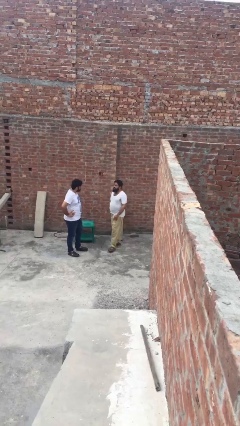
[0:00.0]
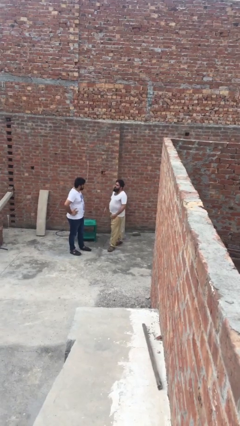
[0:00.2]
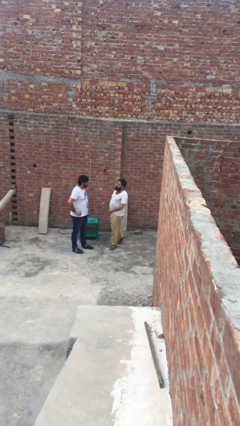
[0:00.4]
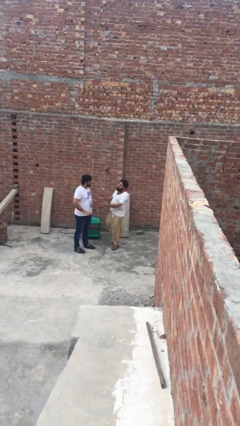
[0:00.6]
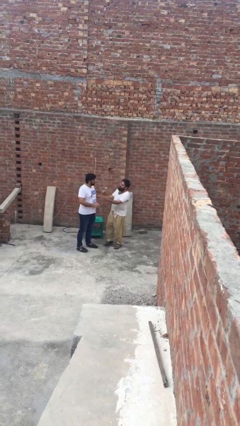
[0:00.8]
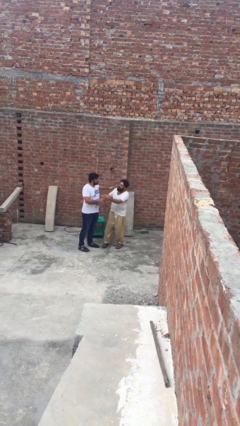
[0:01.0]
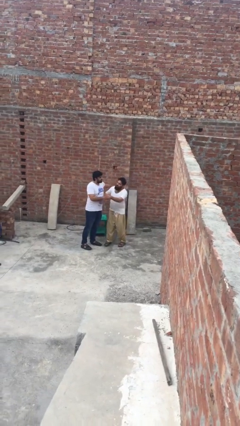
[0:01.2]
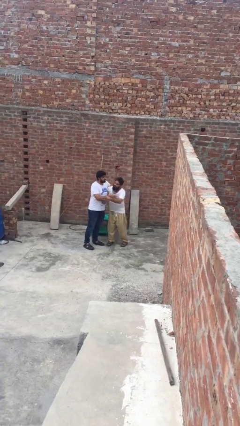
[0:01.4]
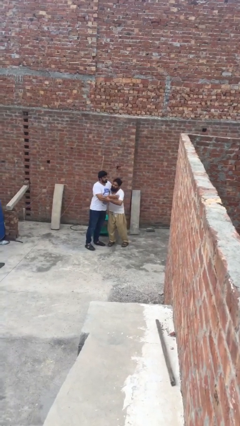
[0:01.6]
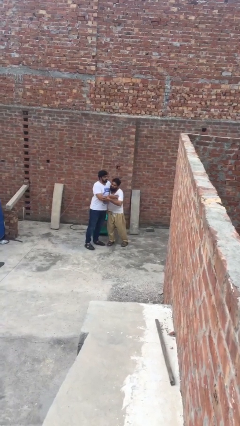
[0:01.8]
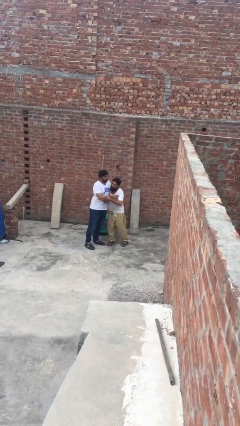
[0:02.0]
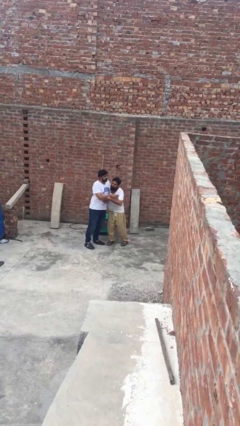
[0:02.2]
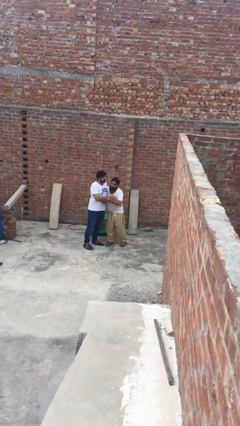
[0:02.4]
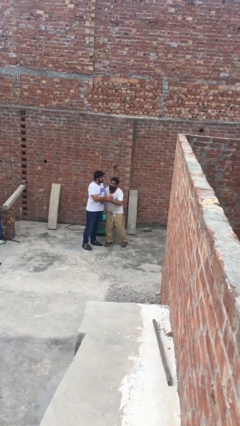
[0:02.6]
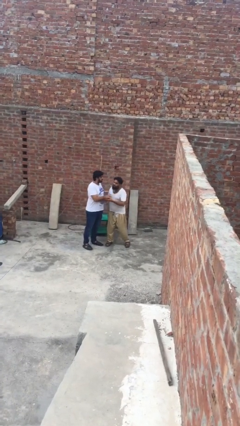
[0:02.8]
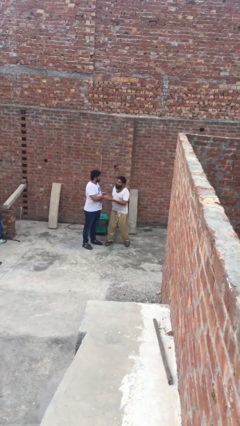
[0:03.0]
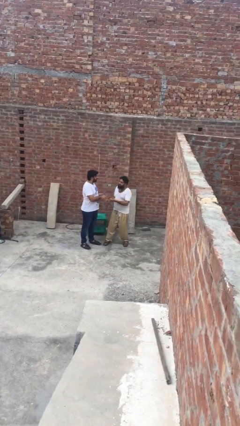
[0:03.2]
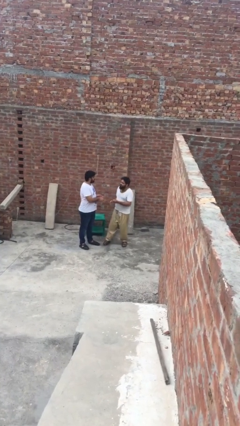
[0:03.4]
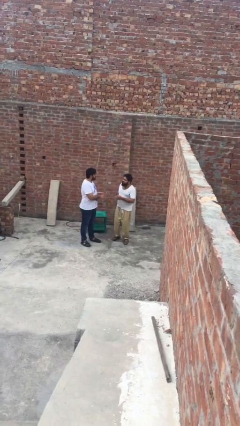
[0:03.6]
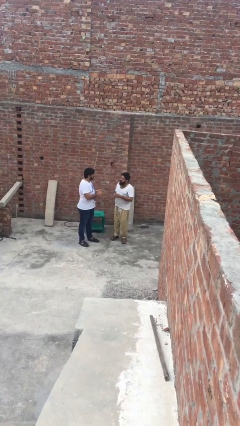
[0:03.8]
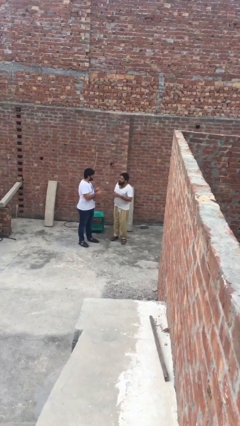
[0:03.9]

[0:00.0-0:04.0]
person embraces person

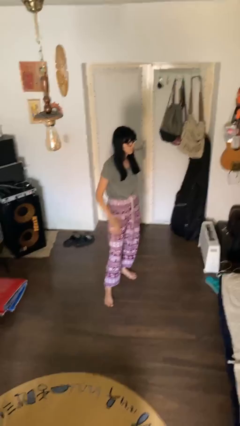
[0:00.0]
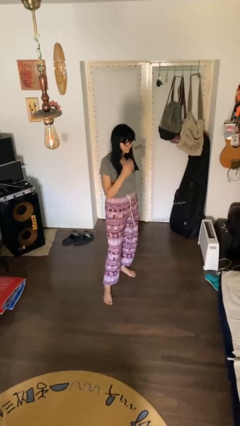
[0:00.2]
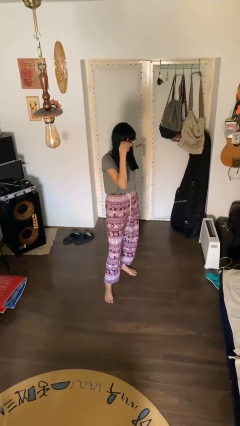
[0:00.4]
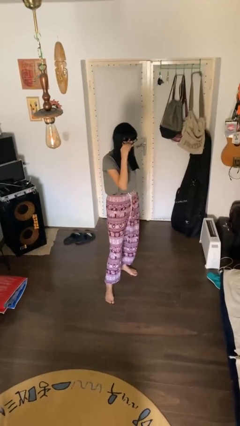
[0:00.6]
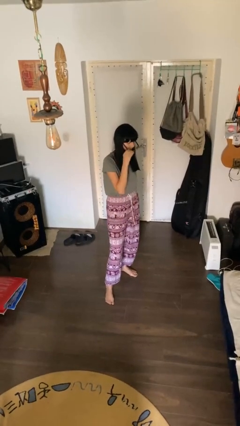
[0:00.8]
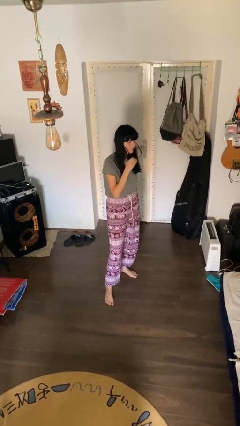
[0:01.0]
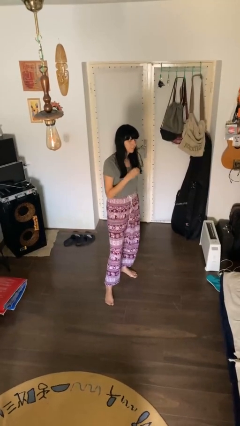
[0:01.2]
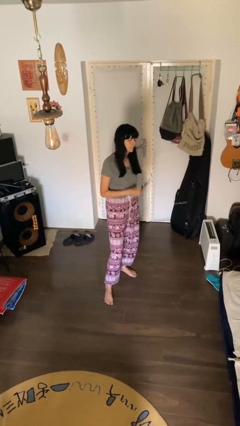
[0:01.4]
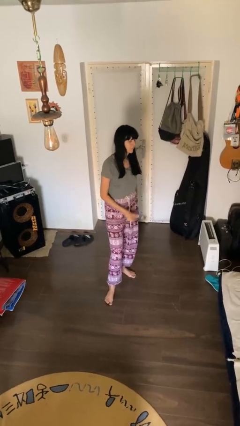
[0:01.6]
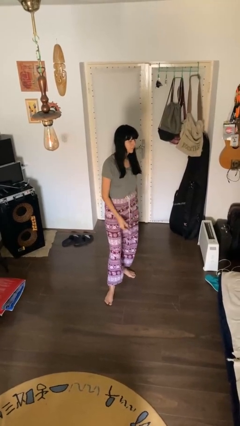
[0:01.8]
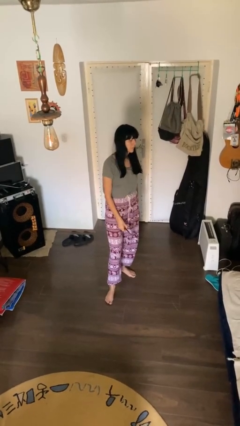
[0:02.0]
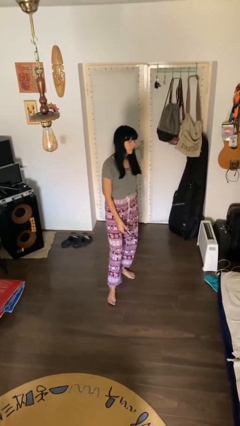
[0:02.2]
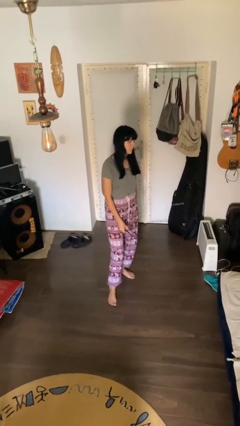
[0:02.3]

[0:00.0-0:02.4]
person takes off glasses

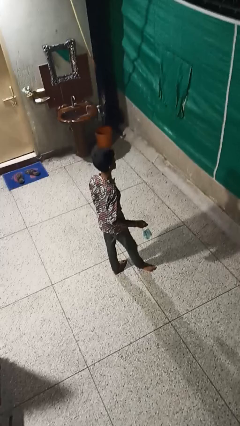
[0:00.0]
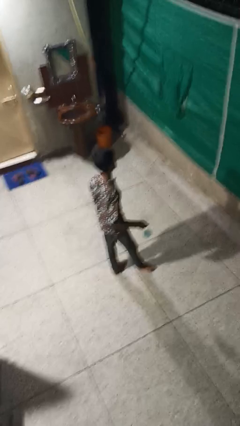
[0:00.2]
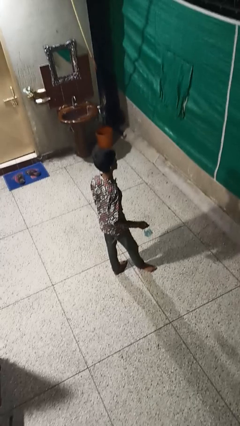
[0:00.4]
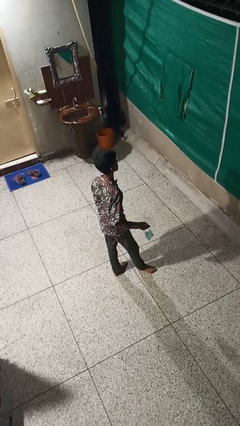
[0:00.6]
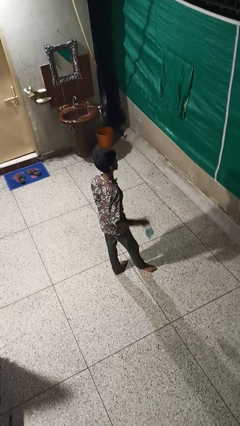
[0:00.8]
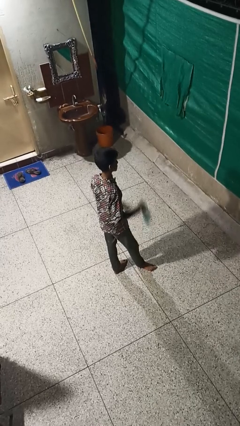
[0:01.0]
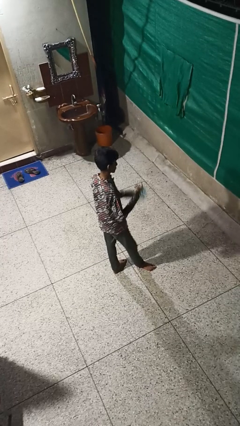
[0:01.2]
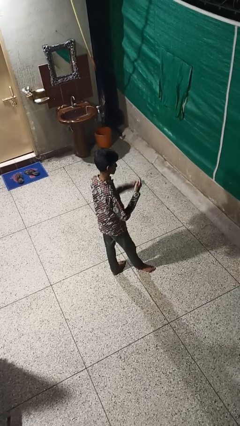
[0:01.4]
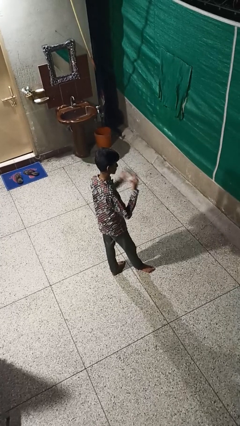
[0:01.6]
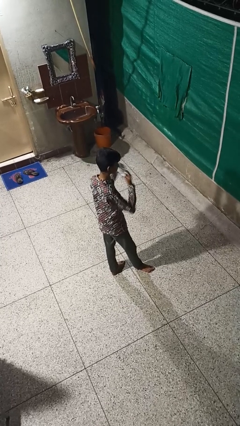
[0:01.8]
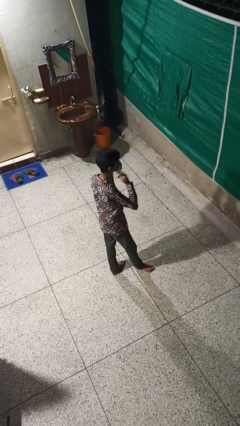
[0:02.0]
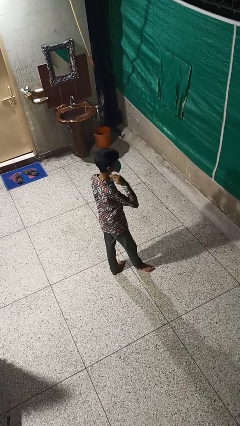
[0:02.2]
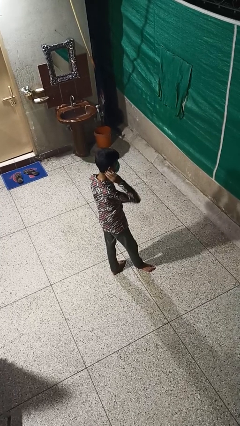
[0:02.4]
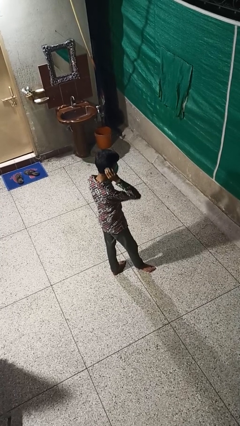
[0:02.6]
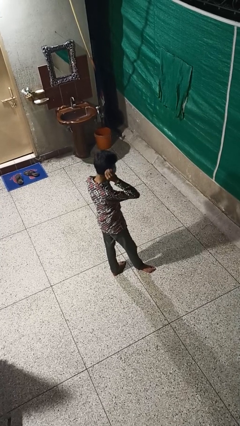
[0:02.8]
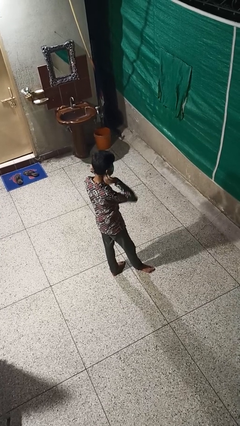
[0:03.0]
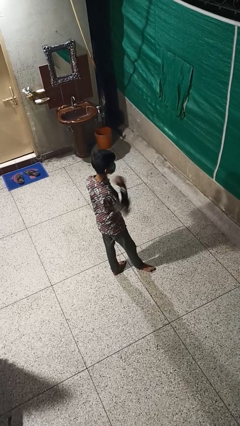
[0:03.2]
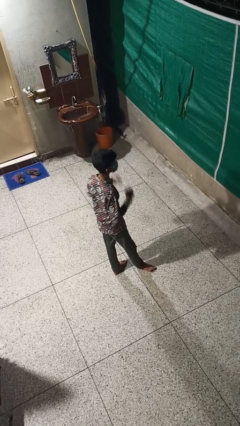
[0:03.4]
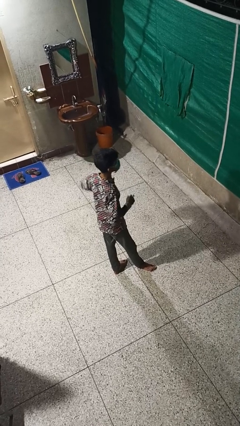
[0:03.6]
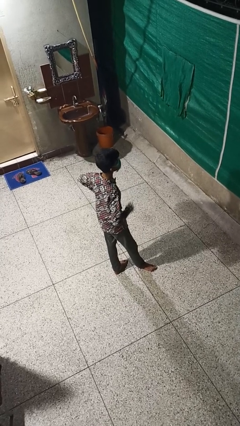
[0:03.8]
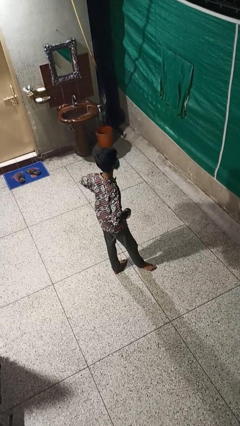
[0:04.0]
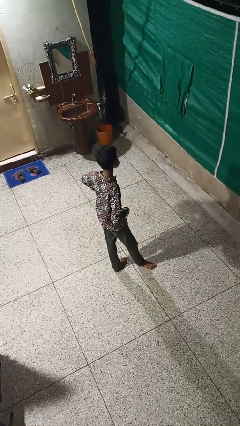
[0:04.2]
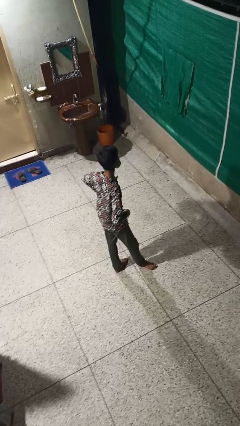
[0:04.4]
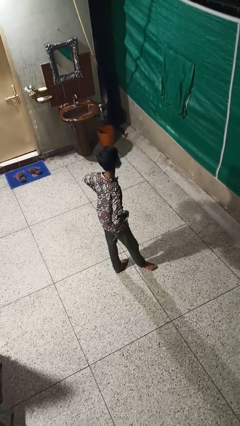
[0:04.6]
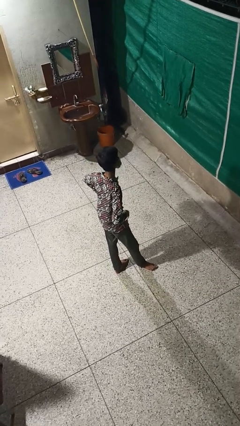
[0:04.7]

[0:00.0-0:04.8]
person puts on facemask

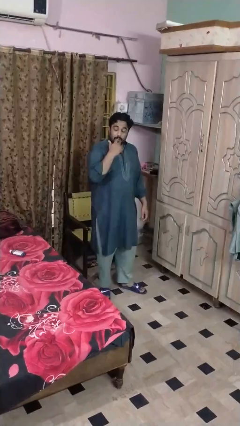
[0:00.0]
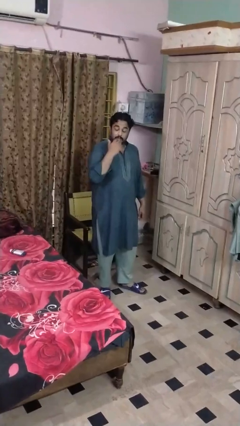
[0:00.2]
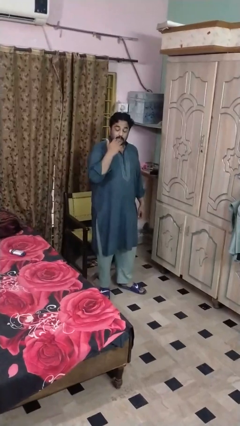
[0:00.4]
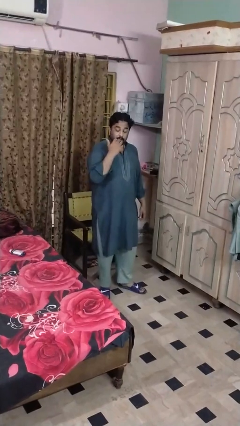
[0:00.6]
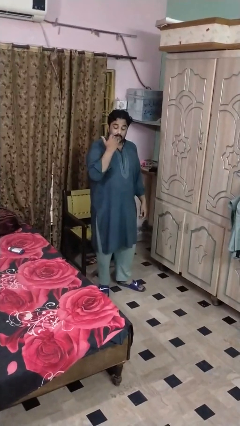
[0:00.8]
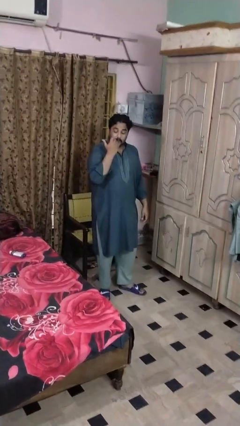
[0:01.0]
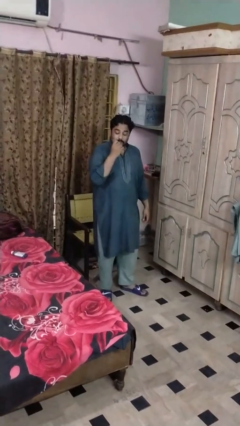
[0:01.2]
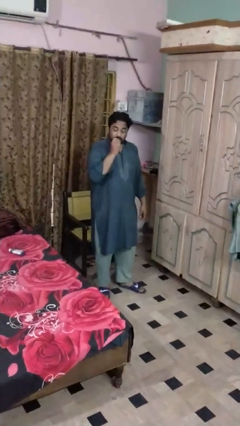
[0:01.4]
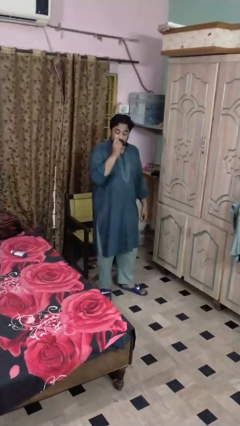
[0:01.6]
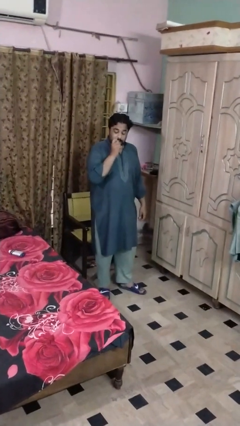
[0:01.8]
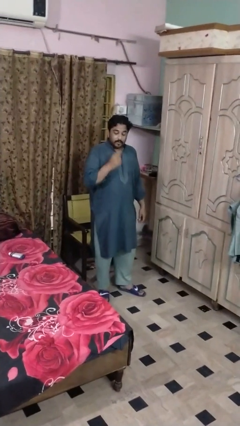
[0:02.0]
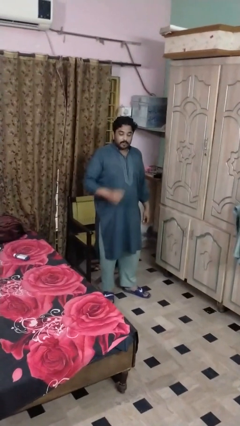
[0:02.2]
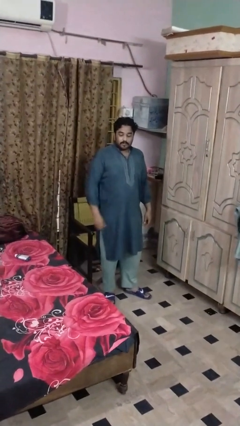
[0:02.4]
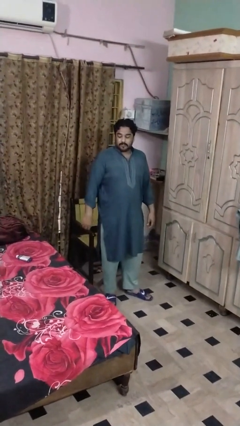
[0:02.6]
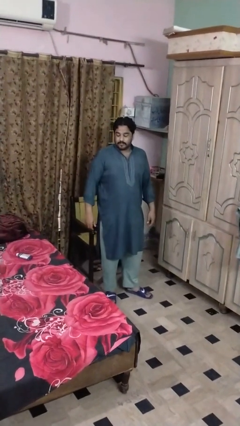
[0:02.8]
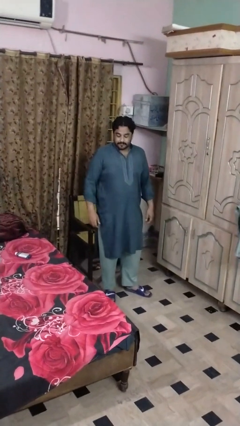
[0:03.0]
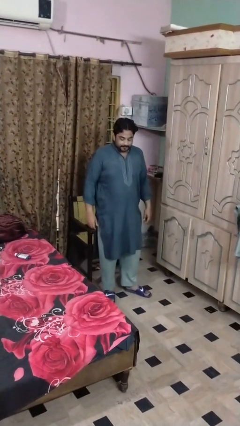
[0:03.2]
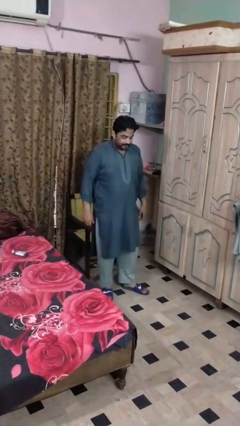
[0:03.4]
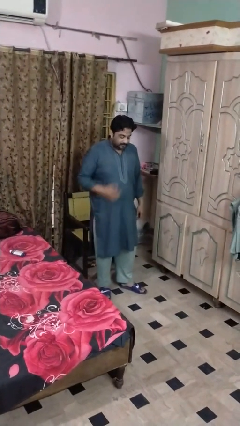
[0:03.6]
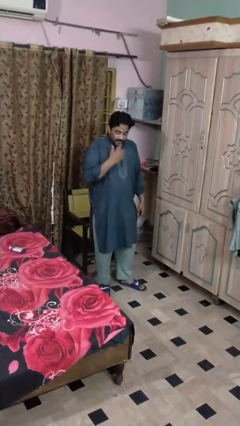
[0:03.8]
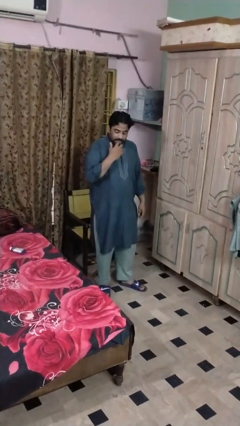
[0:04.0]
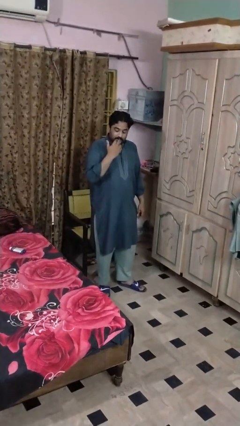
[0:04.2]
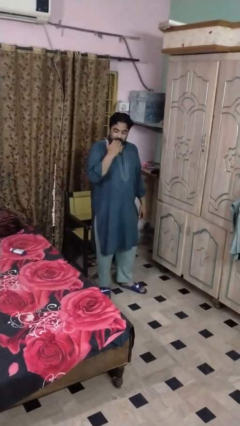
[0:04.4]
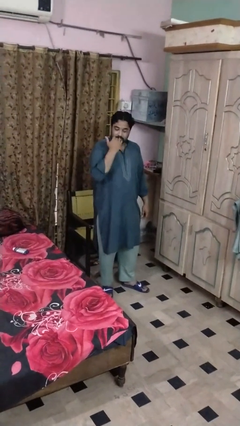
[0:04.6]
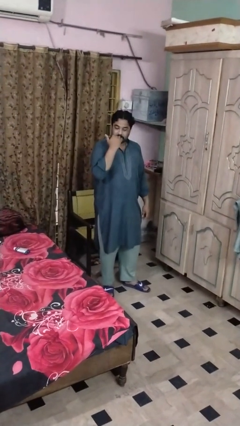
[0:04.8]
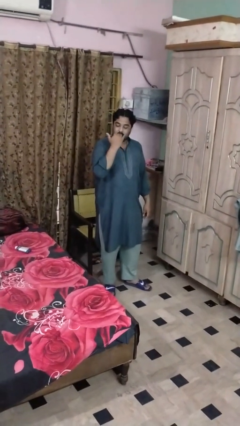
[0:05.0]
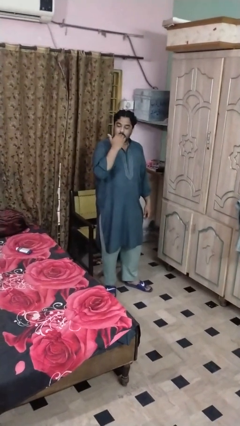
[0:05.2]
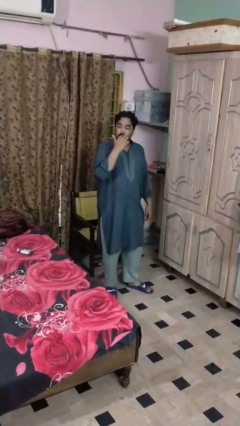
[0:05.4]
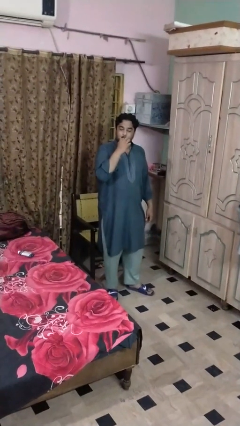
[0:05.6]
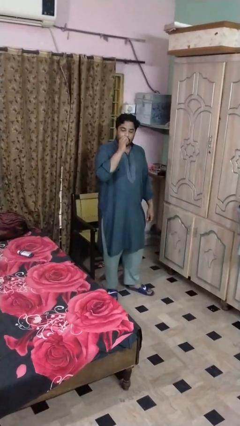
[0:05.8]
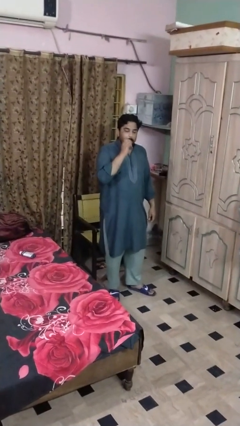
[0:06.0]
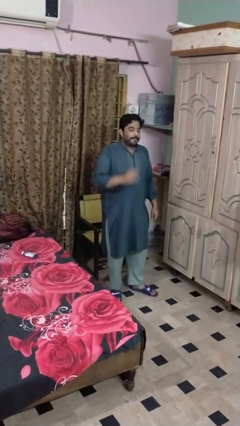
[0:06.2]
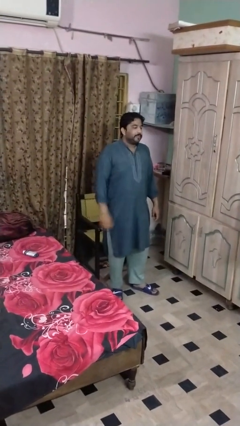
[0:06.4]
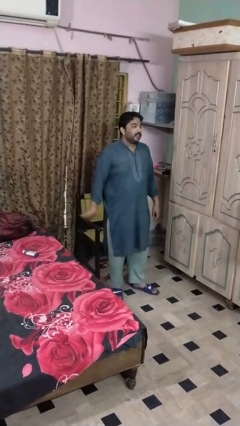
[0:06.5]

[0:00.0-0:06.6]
person licks fingers
